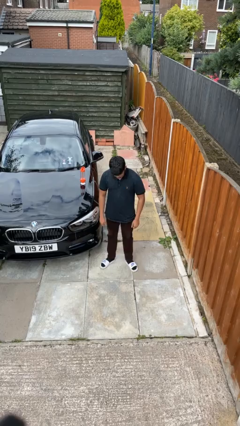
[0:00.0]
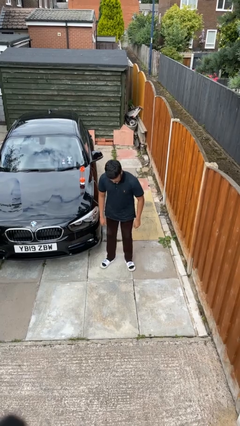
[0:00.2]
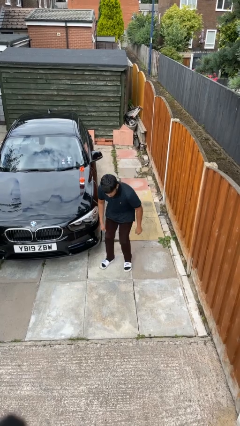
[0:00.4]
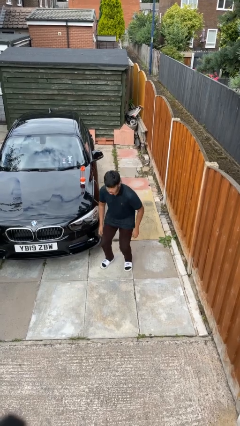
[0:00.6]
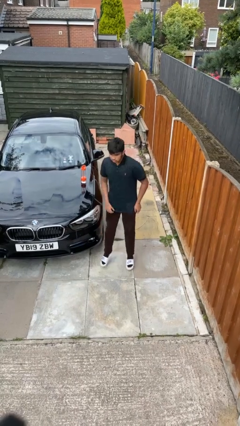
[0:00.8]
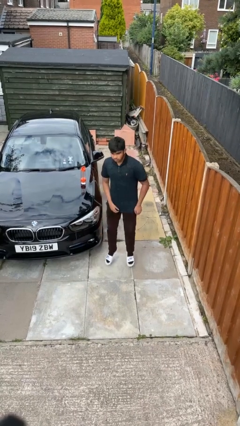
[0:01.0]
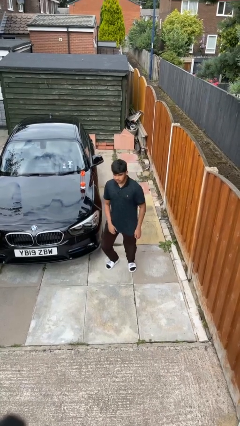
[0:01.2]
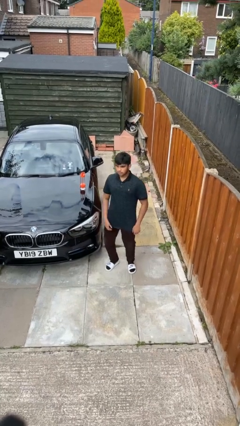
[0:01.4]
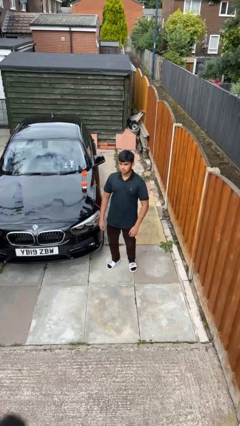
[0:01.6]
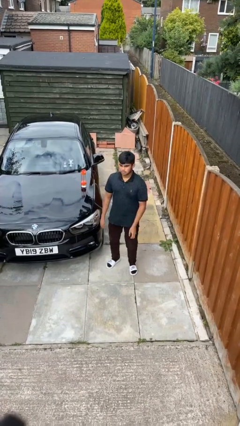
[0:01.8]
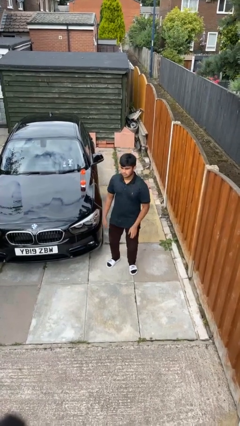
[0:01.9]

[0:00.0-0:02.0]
person jumps

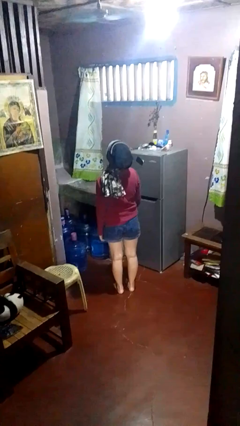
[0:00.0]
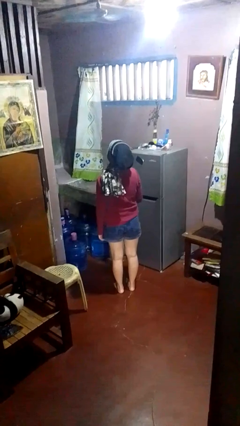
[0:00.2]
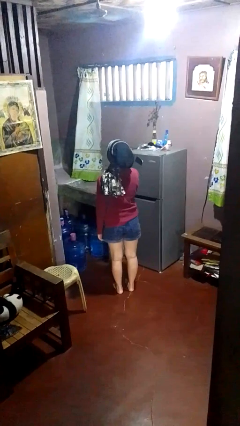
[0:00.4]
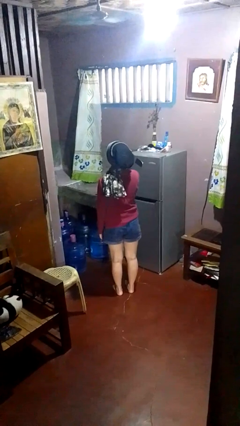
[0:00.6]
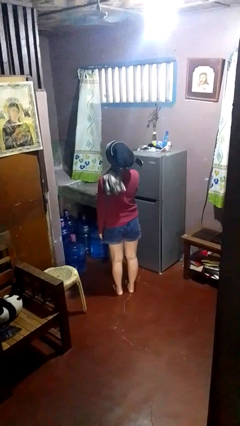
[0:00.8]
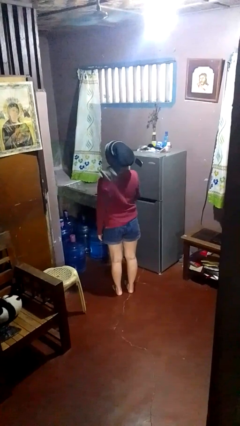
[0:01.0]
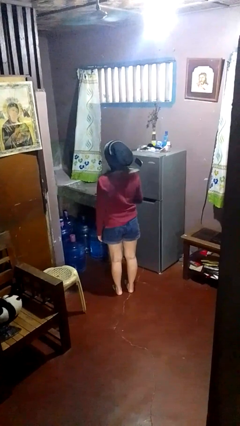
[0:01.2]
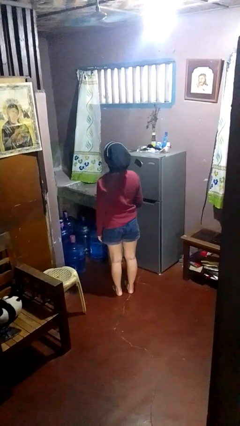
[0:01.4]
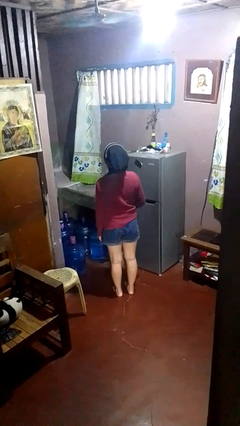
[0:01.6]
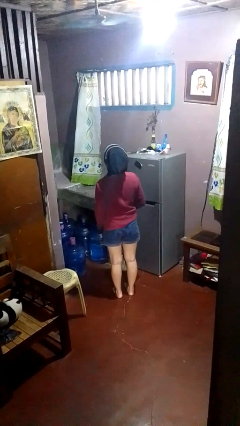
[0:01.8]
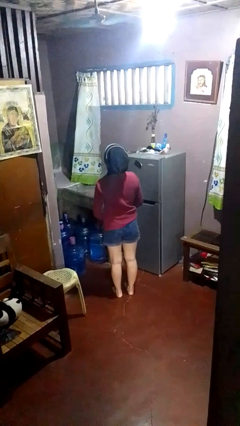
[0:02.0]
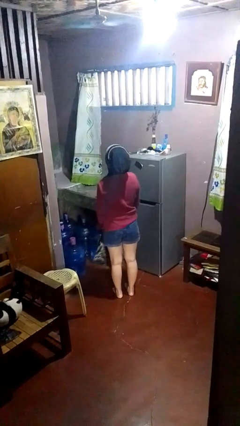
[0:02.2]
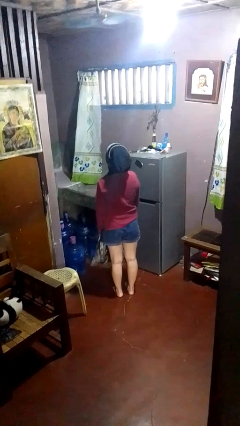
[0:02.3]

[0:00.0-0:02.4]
person takes off scarf

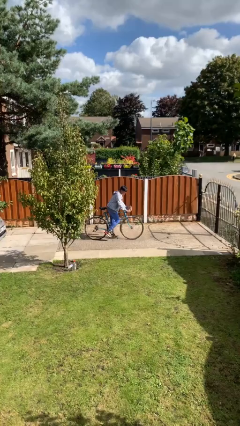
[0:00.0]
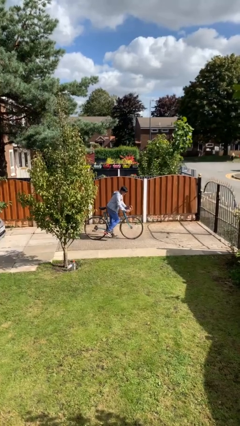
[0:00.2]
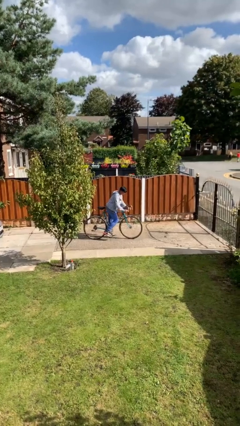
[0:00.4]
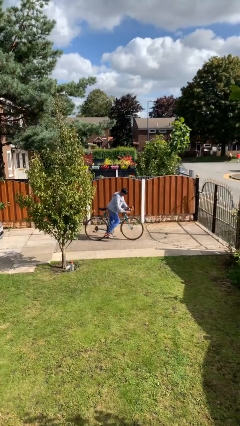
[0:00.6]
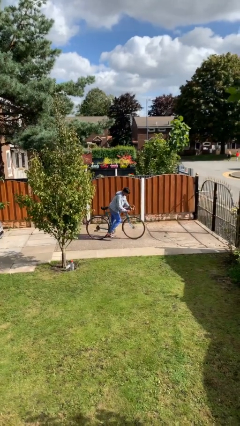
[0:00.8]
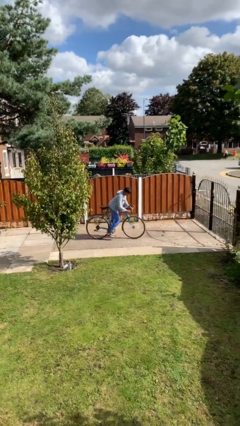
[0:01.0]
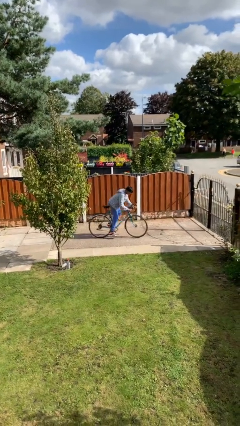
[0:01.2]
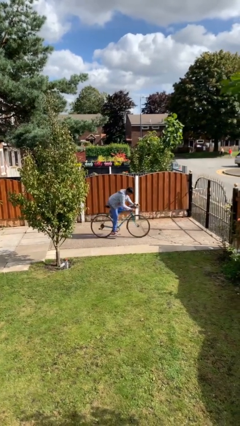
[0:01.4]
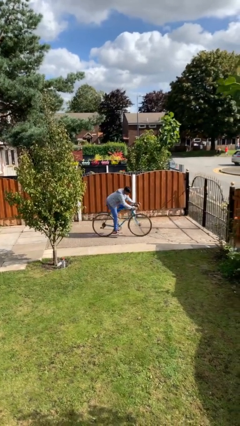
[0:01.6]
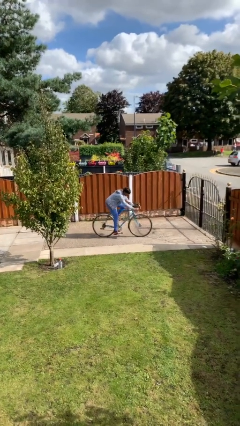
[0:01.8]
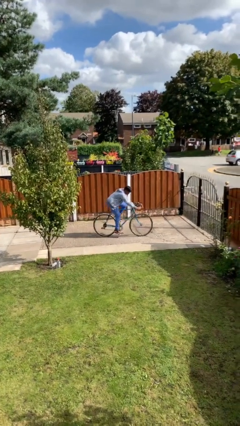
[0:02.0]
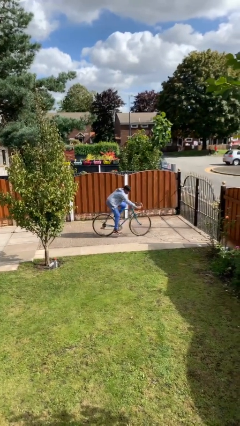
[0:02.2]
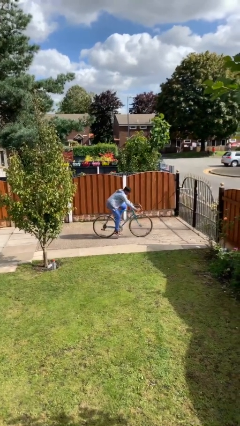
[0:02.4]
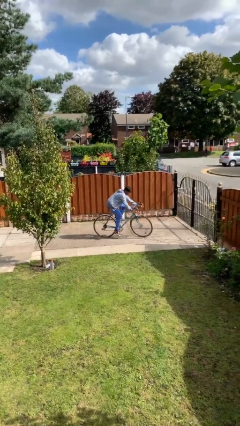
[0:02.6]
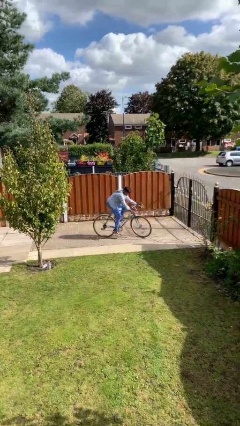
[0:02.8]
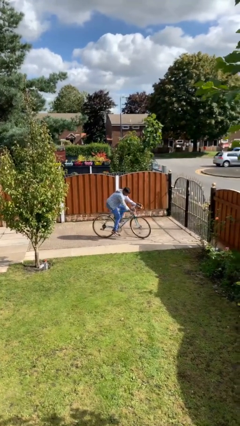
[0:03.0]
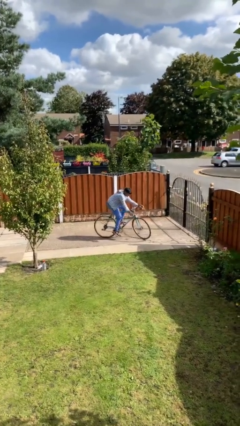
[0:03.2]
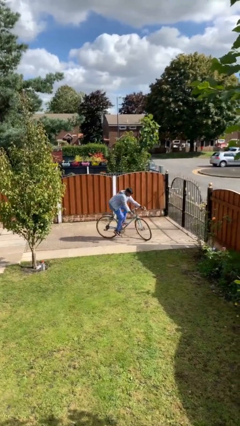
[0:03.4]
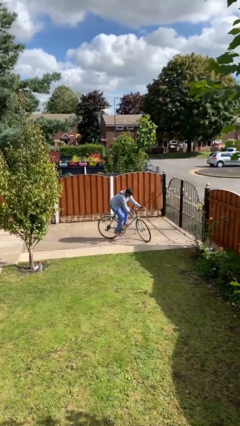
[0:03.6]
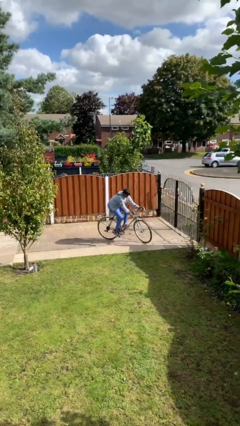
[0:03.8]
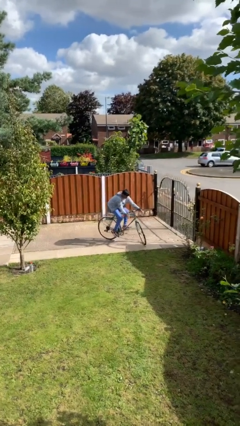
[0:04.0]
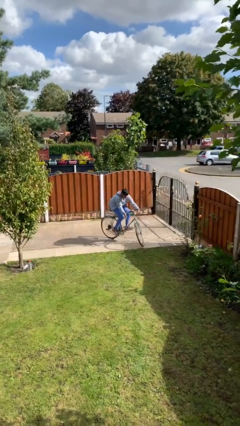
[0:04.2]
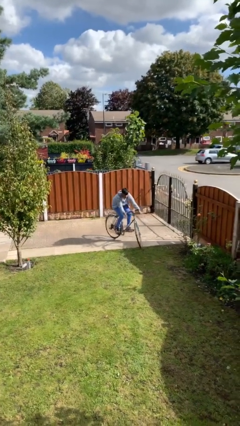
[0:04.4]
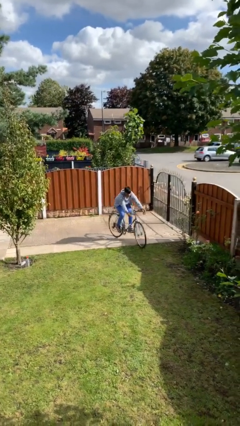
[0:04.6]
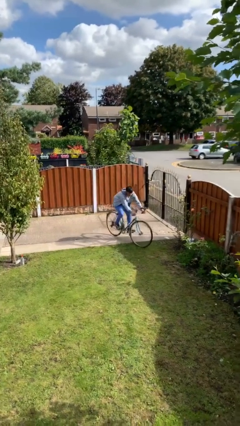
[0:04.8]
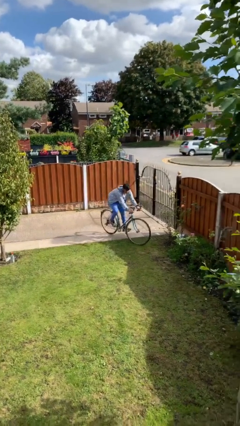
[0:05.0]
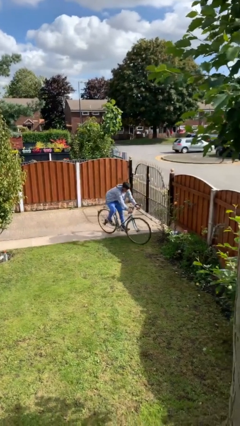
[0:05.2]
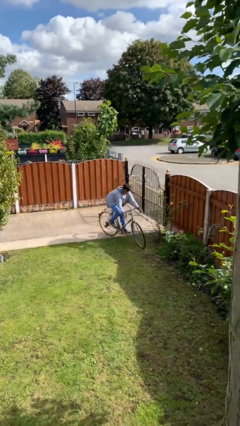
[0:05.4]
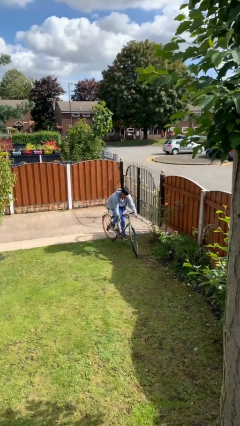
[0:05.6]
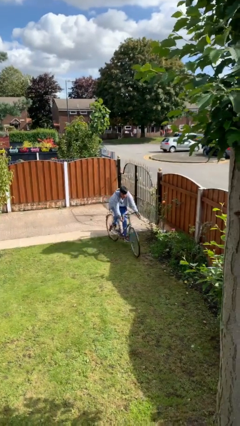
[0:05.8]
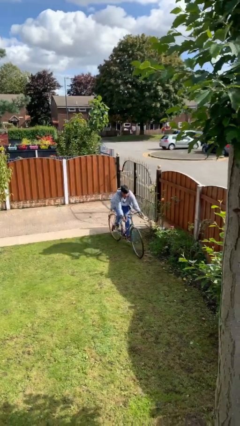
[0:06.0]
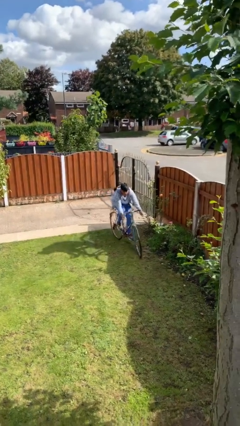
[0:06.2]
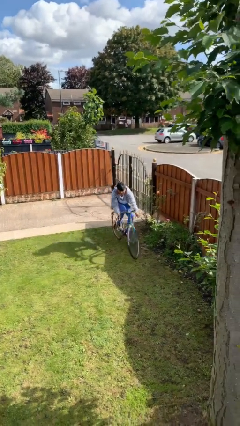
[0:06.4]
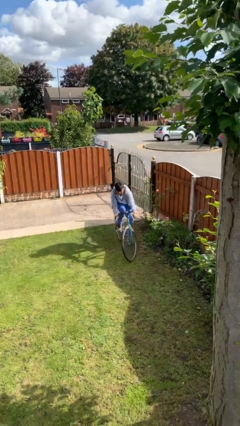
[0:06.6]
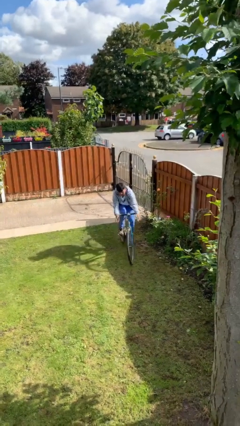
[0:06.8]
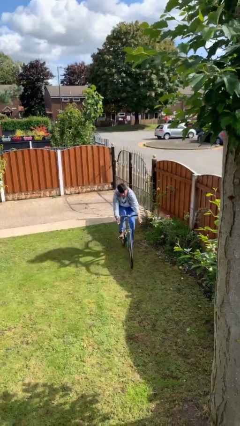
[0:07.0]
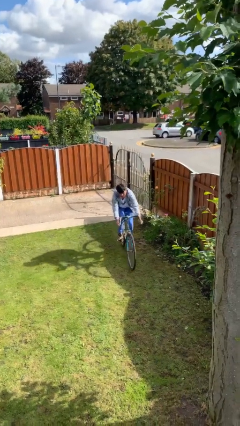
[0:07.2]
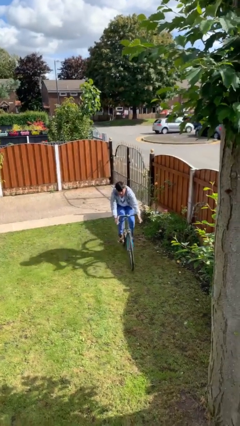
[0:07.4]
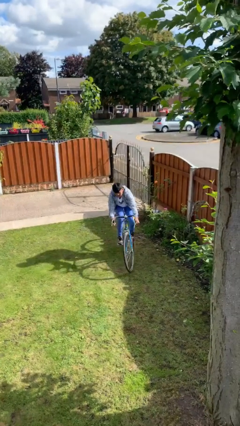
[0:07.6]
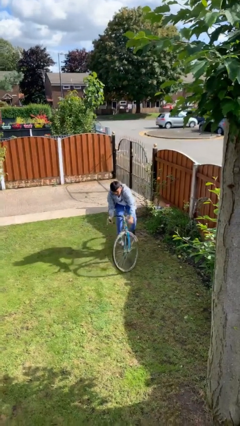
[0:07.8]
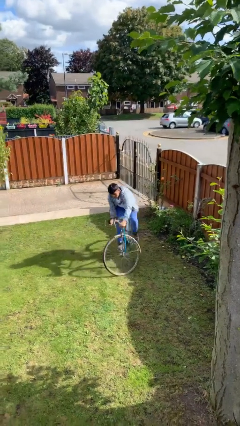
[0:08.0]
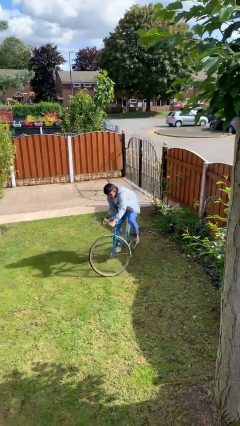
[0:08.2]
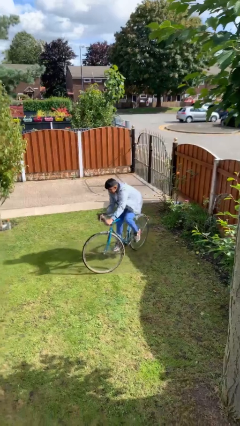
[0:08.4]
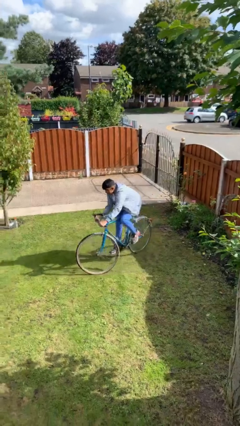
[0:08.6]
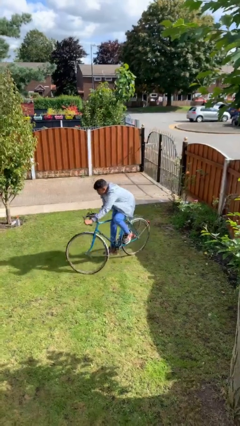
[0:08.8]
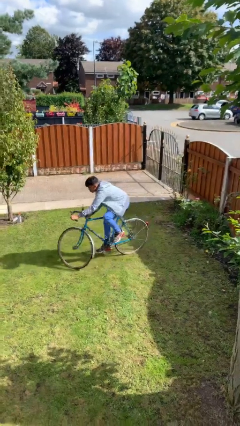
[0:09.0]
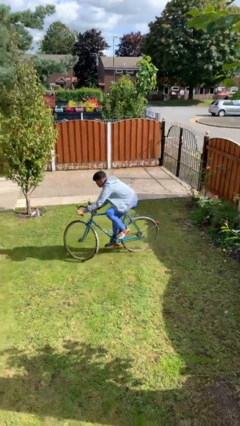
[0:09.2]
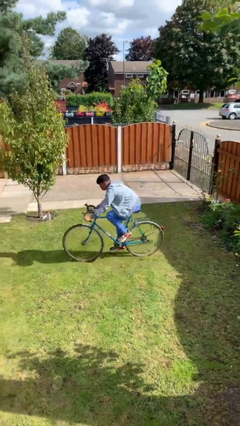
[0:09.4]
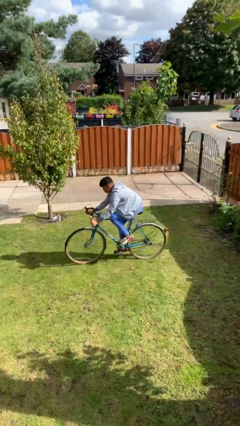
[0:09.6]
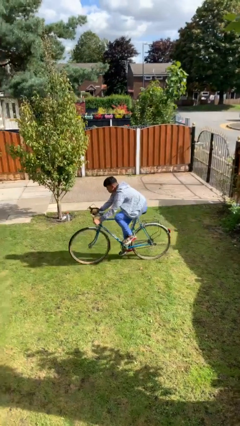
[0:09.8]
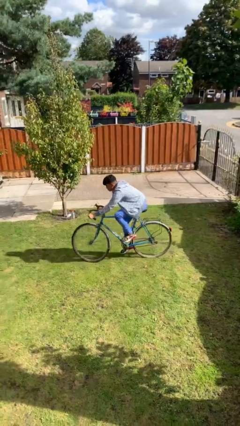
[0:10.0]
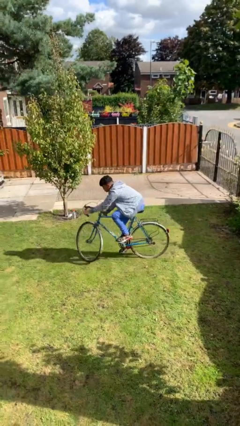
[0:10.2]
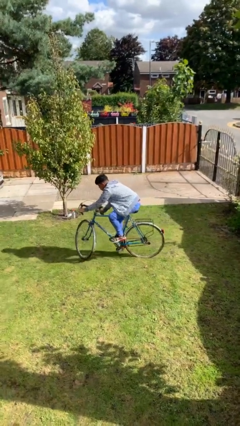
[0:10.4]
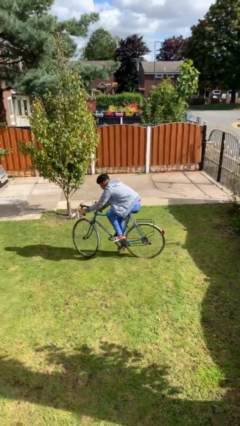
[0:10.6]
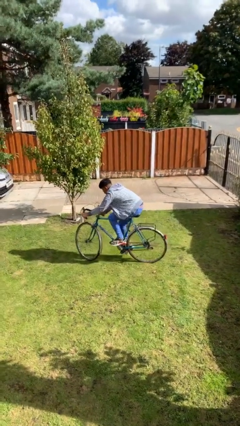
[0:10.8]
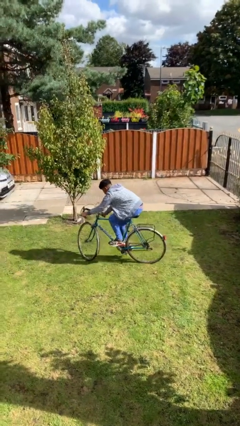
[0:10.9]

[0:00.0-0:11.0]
person rides bicycle

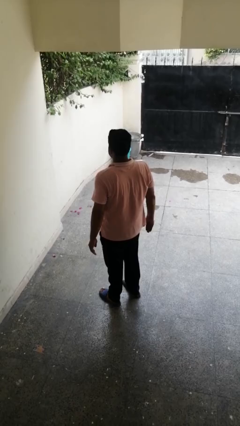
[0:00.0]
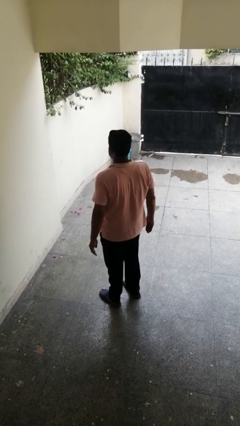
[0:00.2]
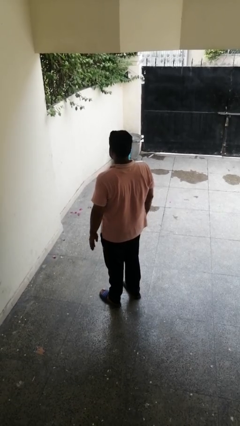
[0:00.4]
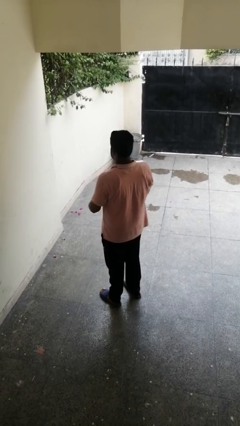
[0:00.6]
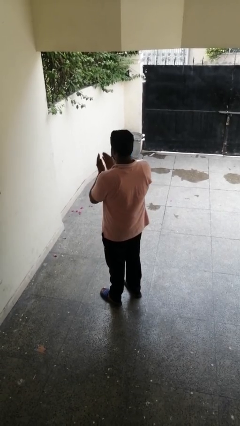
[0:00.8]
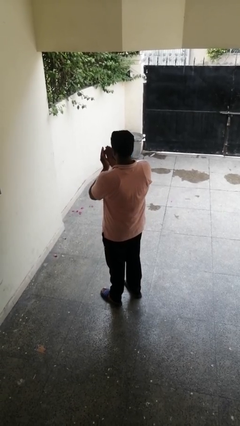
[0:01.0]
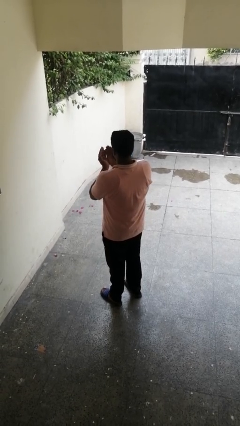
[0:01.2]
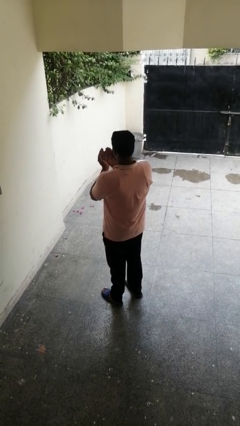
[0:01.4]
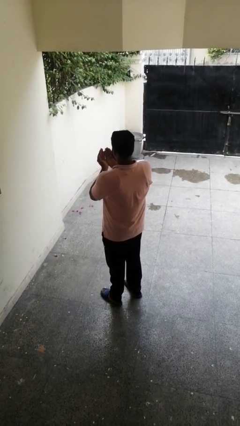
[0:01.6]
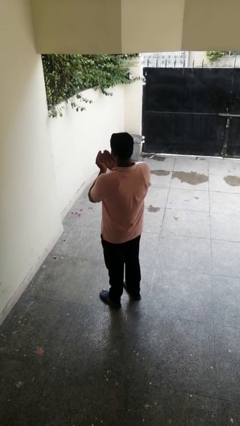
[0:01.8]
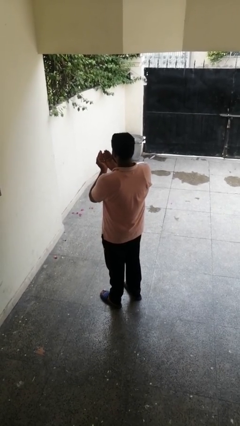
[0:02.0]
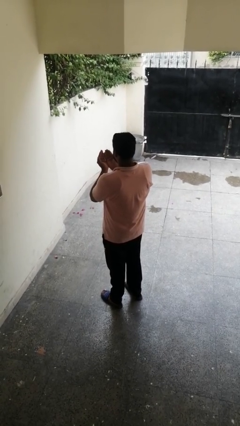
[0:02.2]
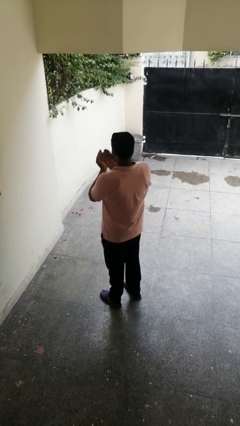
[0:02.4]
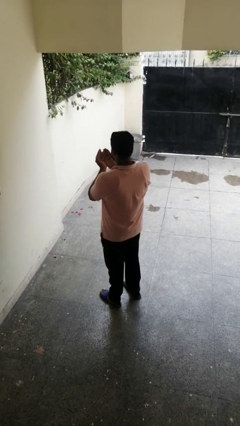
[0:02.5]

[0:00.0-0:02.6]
person prays
